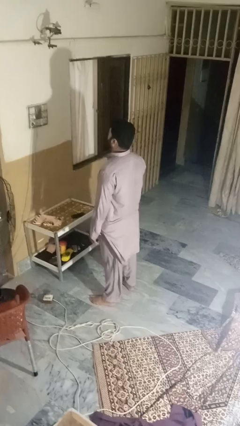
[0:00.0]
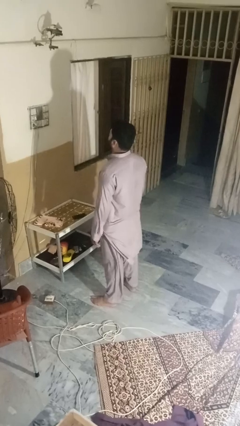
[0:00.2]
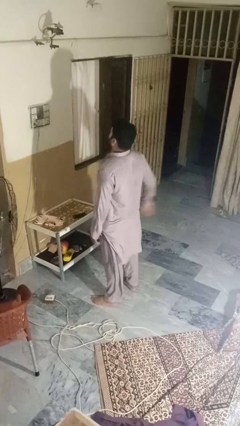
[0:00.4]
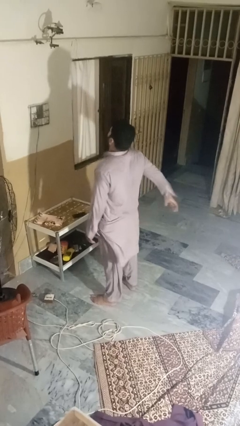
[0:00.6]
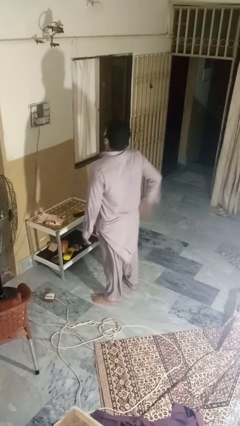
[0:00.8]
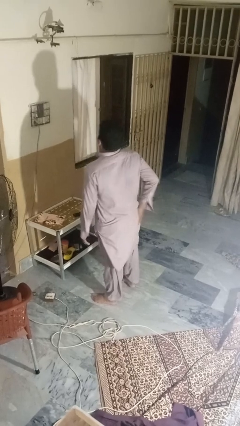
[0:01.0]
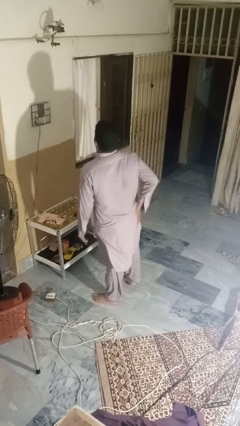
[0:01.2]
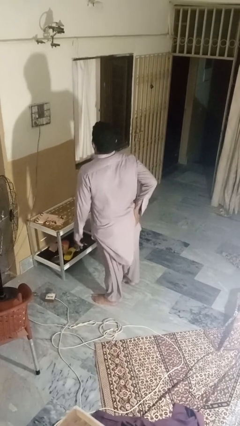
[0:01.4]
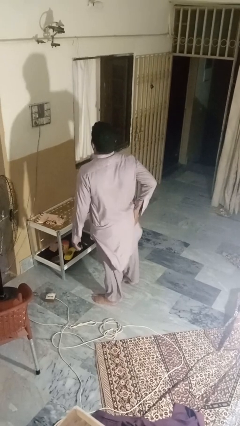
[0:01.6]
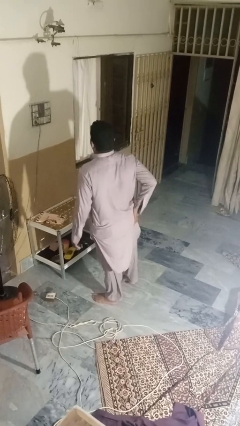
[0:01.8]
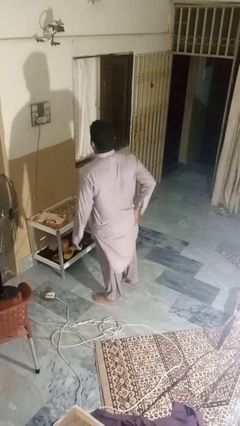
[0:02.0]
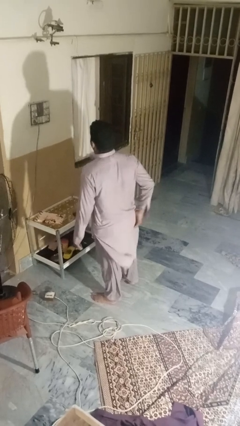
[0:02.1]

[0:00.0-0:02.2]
person wiggles hips

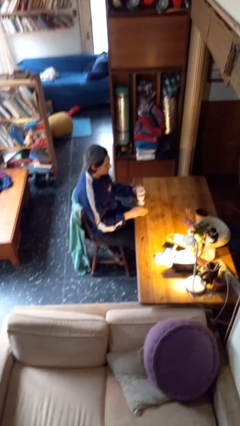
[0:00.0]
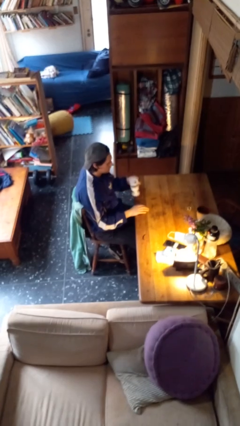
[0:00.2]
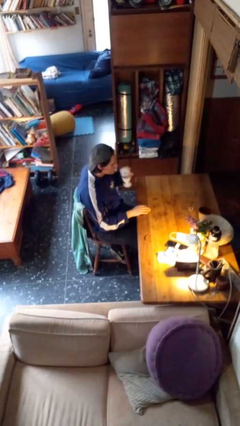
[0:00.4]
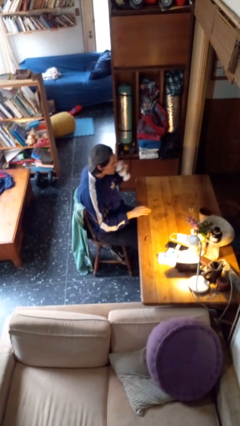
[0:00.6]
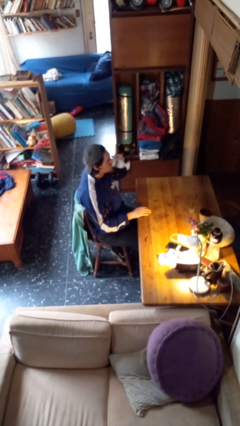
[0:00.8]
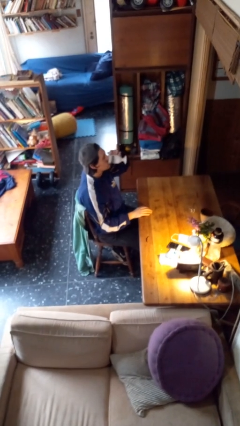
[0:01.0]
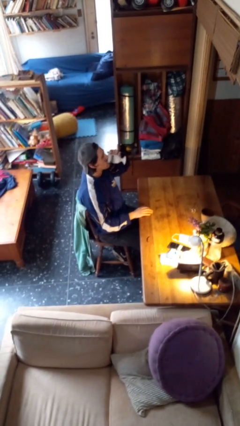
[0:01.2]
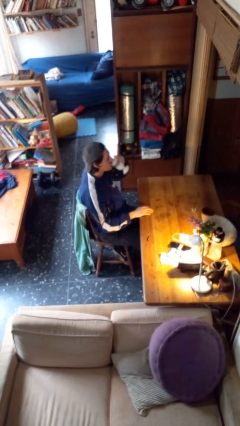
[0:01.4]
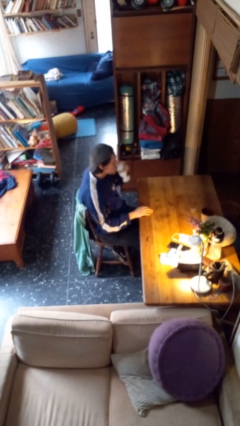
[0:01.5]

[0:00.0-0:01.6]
person drinks from mug

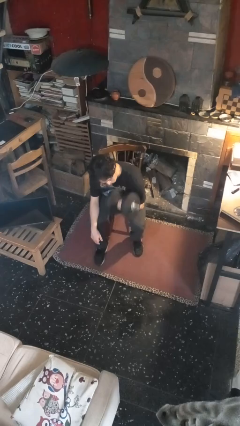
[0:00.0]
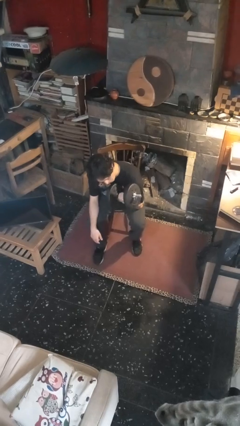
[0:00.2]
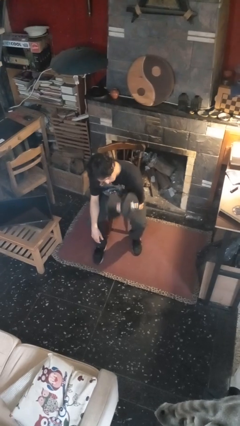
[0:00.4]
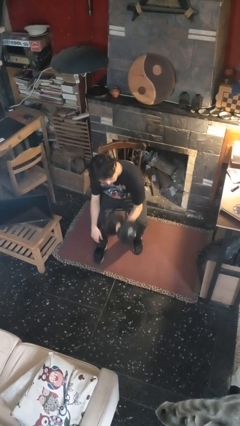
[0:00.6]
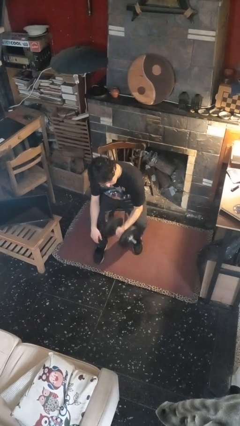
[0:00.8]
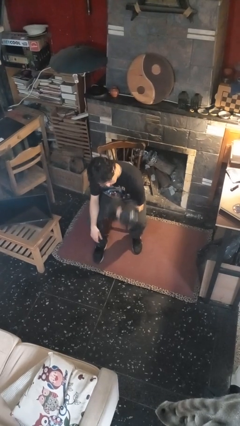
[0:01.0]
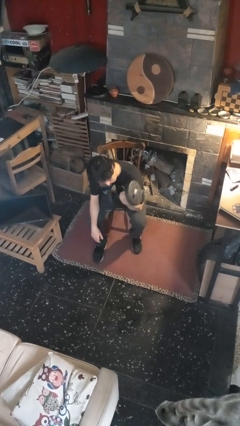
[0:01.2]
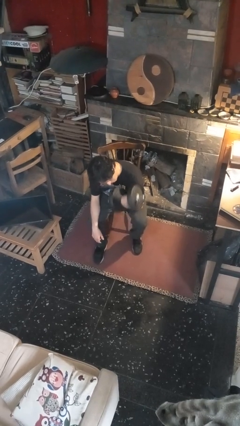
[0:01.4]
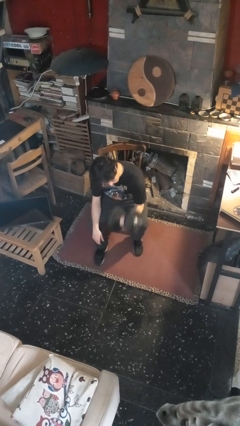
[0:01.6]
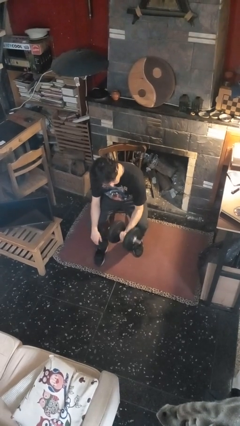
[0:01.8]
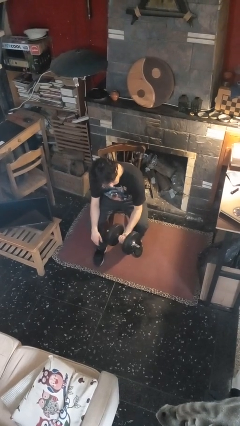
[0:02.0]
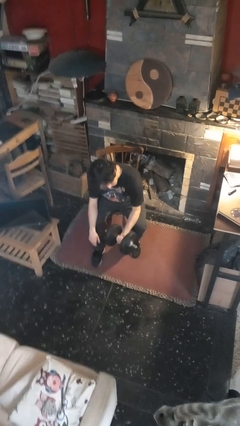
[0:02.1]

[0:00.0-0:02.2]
person lifts dumbbells

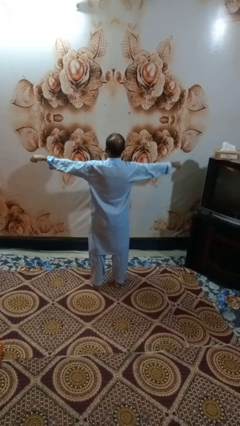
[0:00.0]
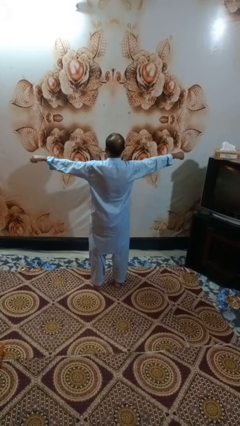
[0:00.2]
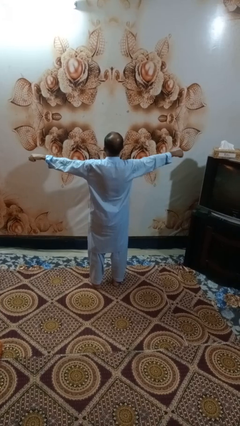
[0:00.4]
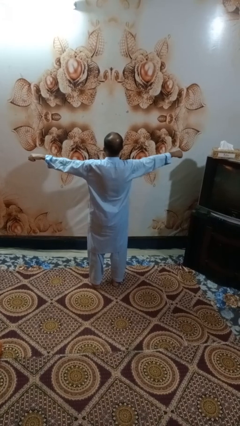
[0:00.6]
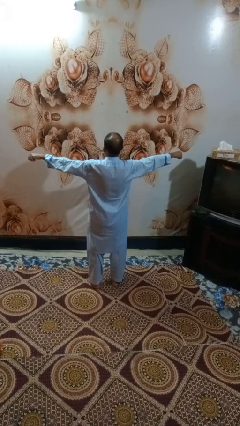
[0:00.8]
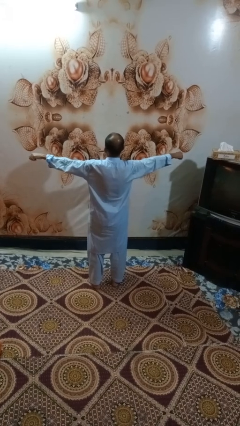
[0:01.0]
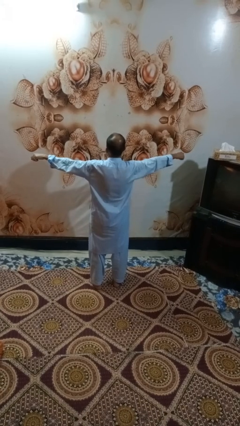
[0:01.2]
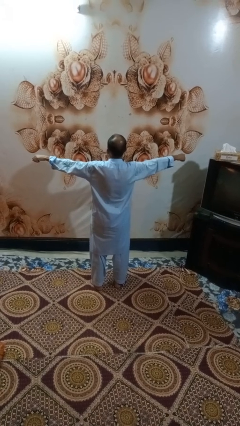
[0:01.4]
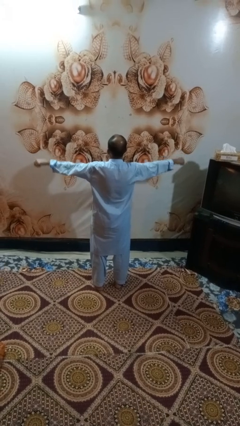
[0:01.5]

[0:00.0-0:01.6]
person gestures swipe right

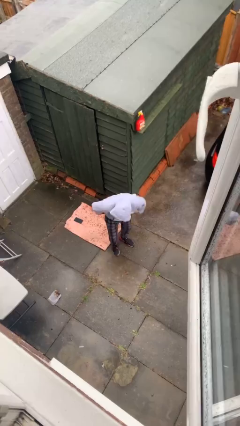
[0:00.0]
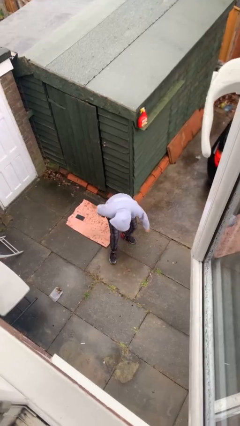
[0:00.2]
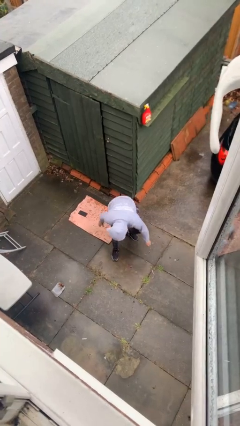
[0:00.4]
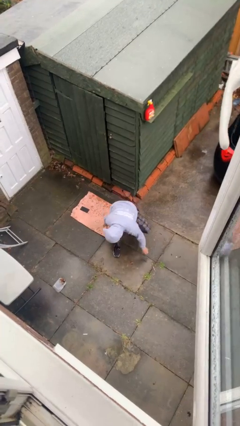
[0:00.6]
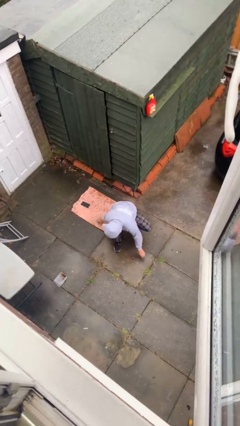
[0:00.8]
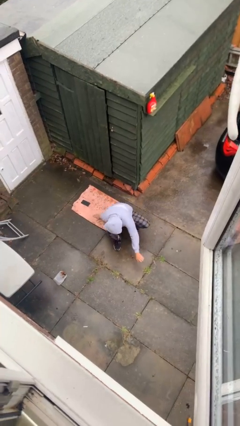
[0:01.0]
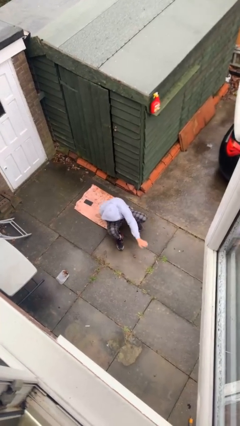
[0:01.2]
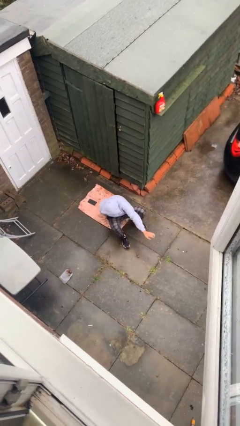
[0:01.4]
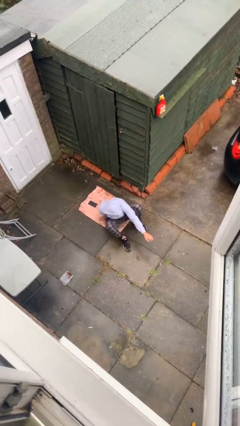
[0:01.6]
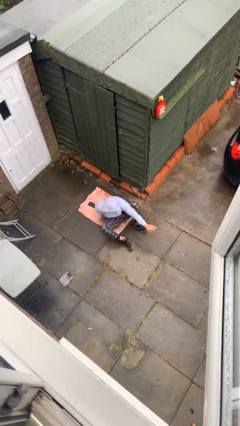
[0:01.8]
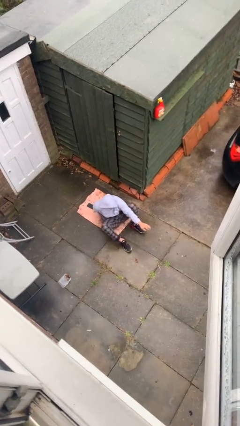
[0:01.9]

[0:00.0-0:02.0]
person sits down

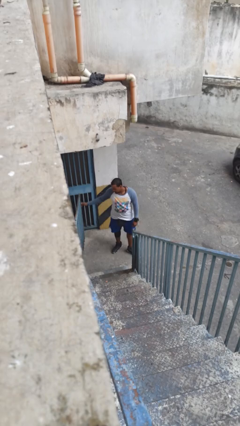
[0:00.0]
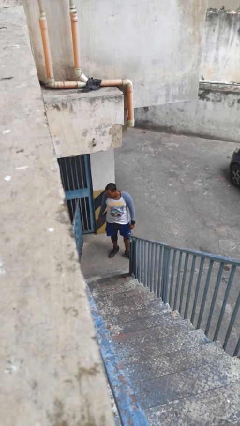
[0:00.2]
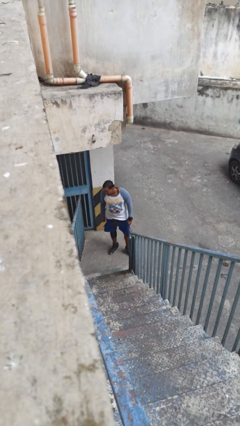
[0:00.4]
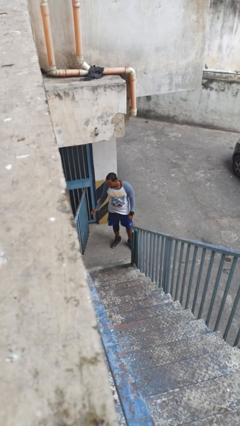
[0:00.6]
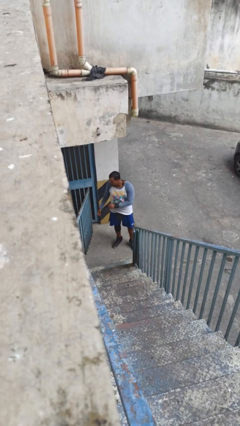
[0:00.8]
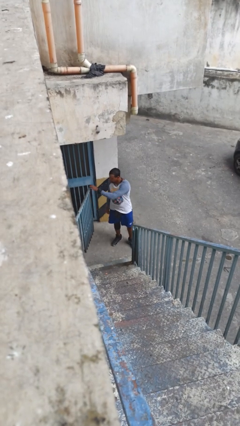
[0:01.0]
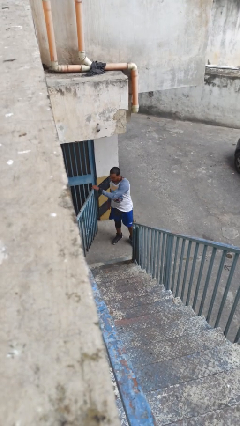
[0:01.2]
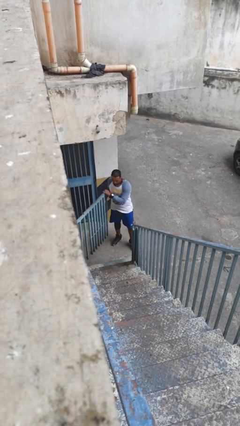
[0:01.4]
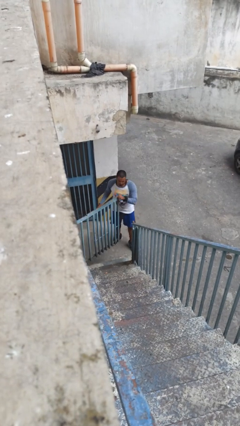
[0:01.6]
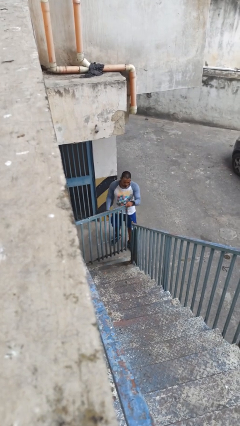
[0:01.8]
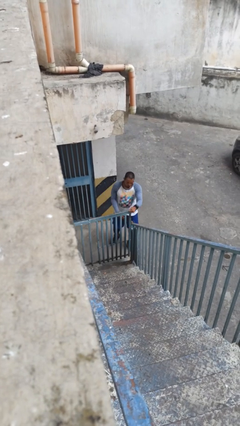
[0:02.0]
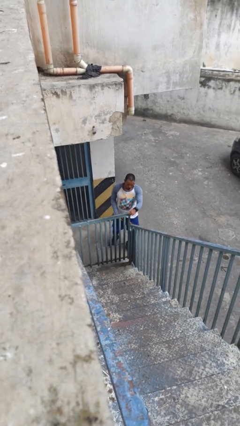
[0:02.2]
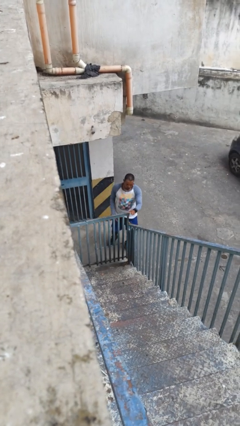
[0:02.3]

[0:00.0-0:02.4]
person closes facility door

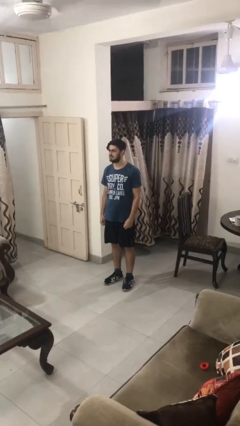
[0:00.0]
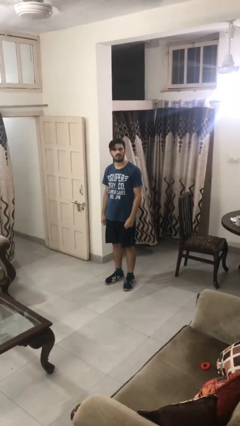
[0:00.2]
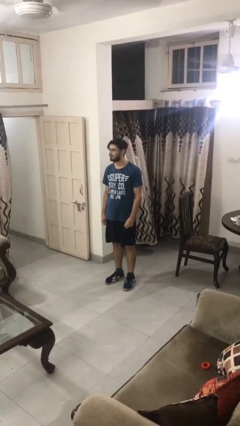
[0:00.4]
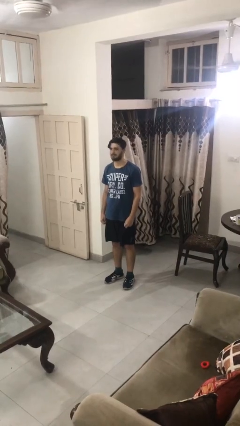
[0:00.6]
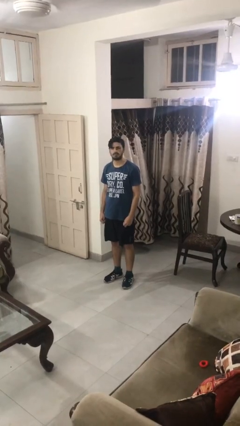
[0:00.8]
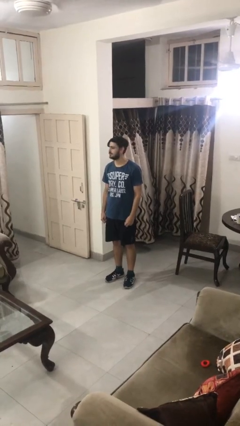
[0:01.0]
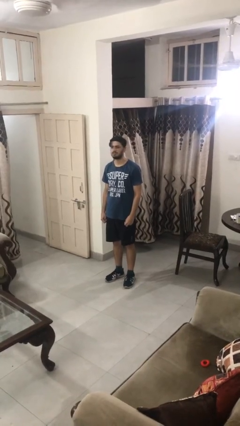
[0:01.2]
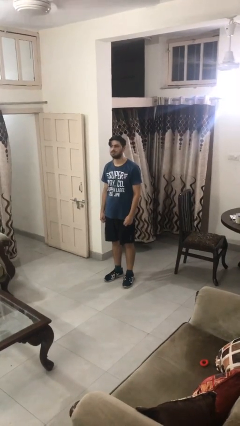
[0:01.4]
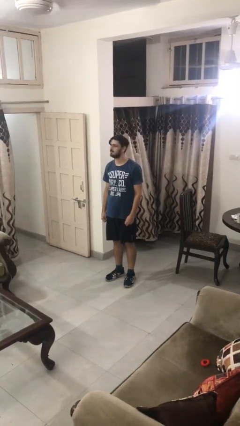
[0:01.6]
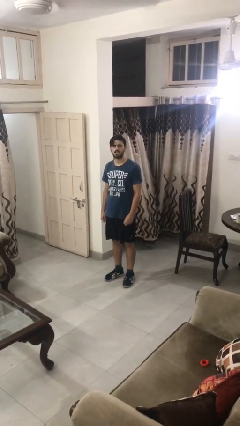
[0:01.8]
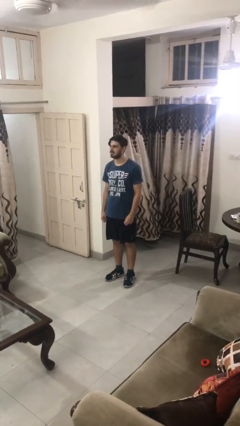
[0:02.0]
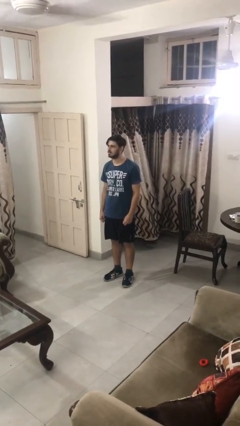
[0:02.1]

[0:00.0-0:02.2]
person shakes head

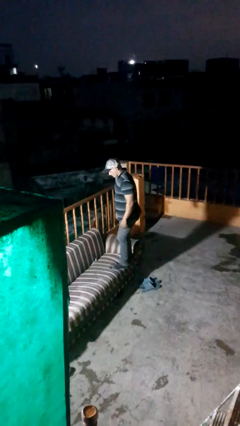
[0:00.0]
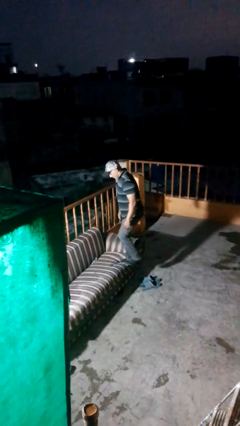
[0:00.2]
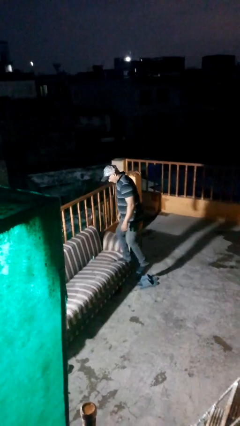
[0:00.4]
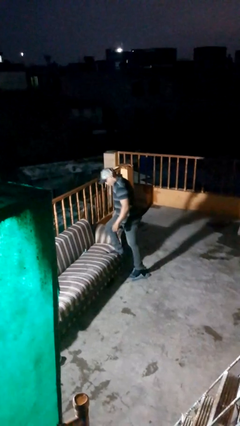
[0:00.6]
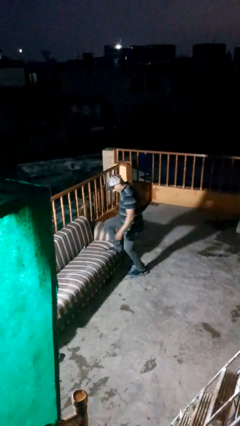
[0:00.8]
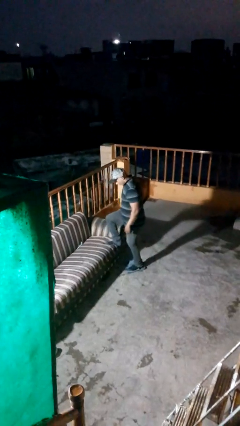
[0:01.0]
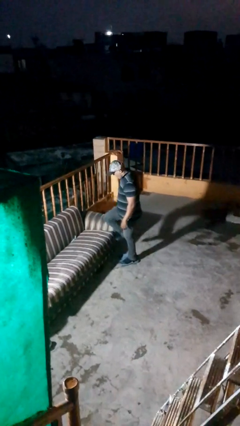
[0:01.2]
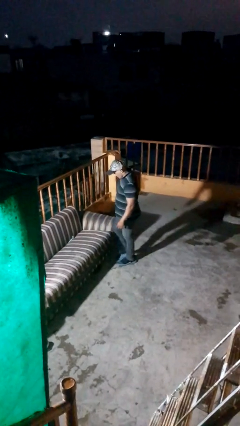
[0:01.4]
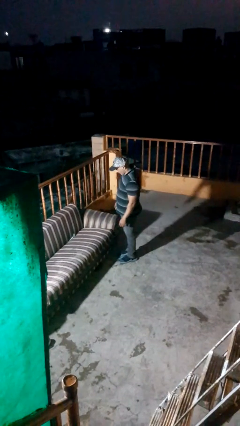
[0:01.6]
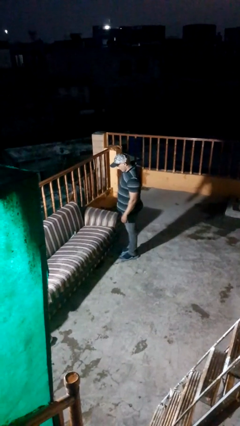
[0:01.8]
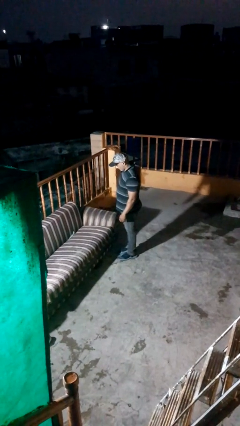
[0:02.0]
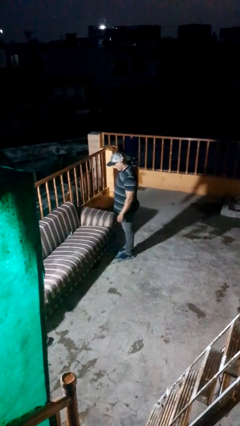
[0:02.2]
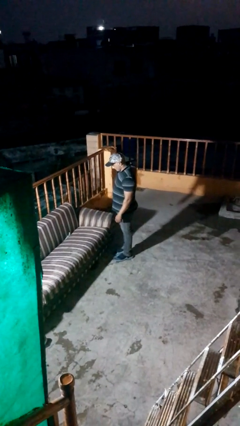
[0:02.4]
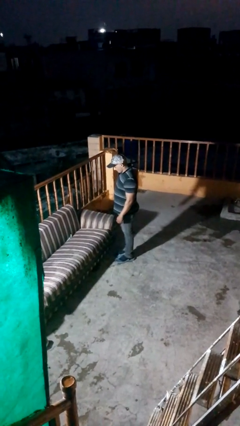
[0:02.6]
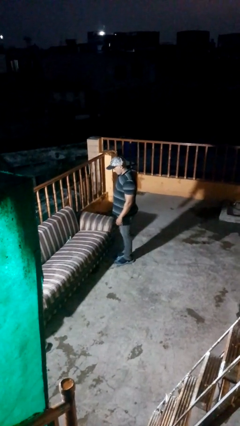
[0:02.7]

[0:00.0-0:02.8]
person climbs off couch
